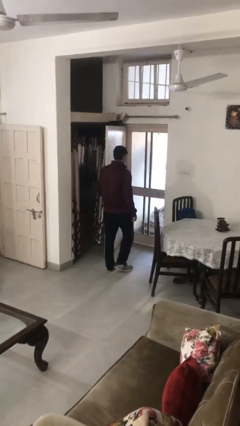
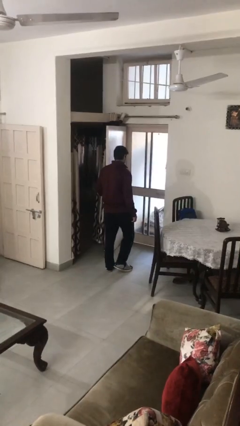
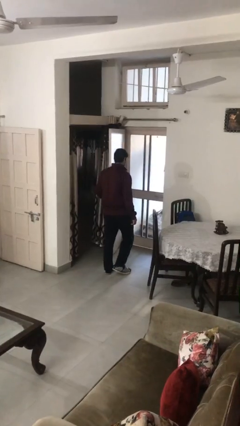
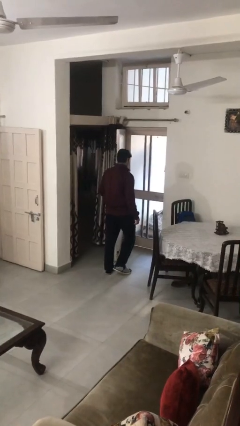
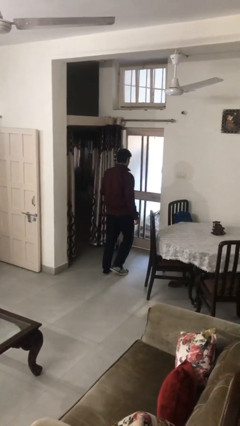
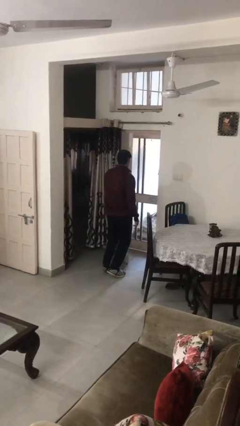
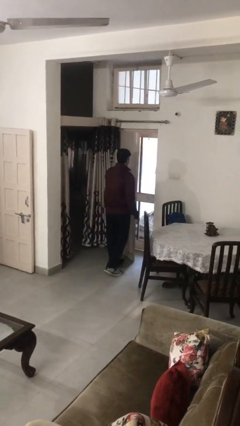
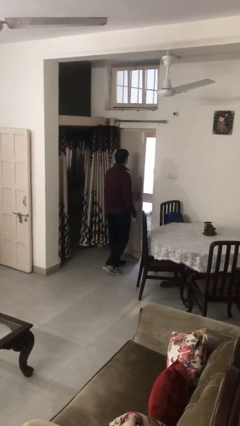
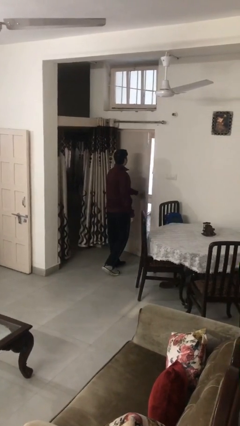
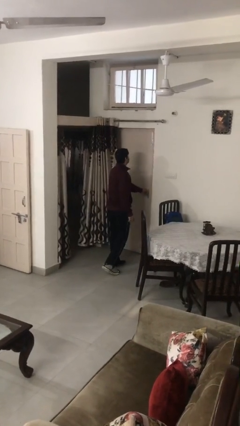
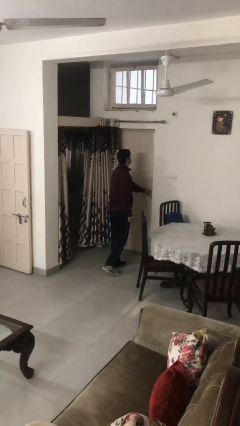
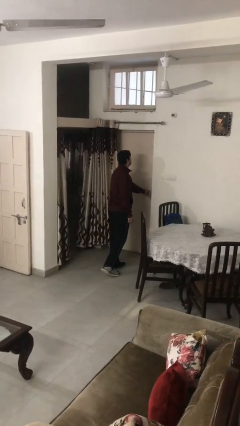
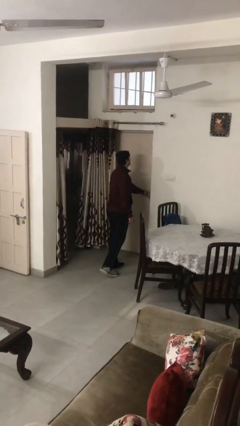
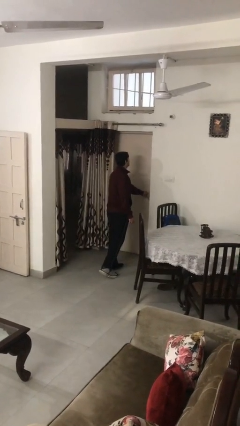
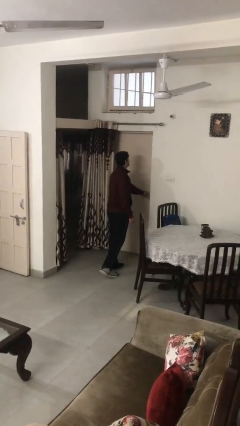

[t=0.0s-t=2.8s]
person closes facility door

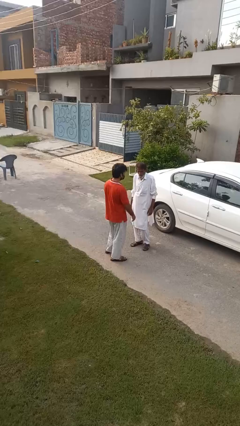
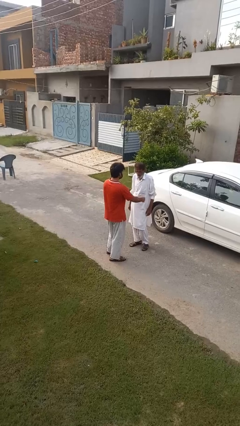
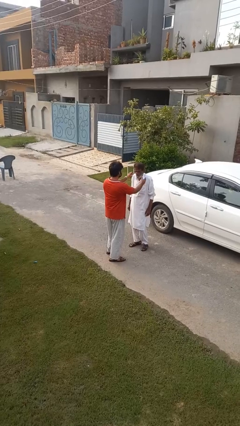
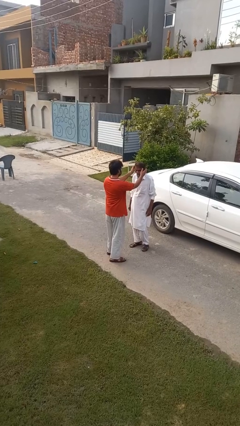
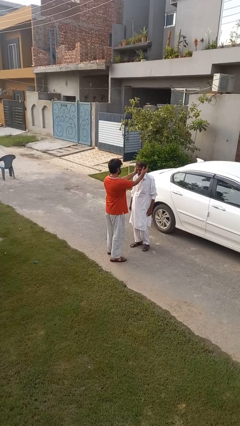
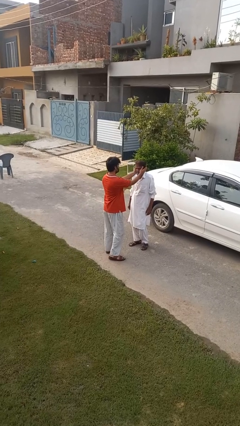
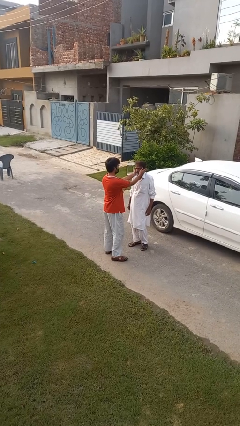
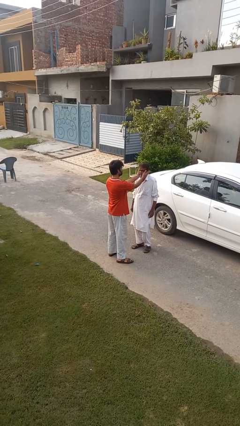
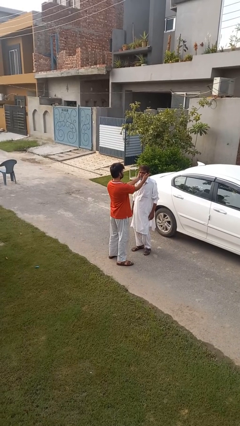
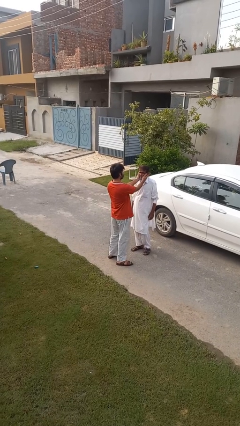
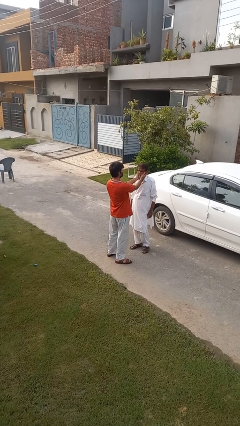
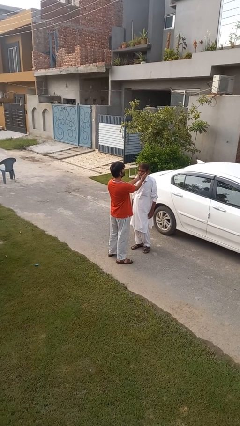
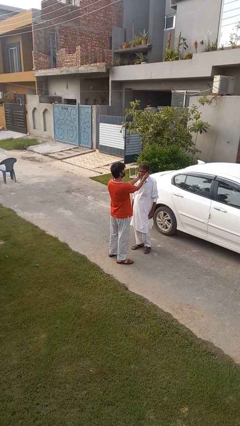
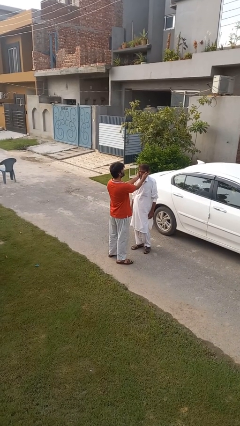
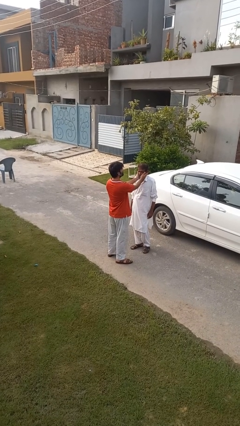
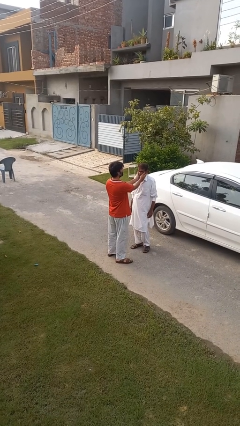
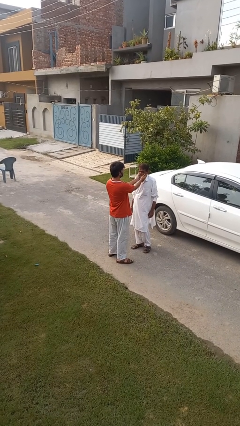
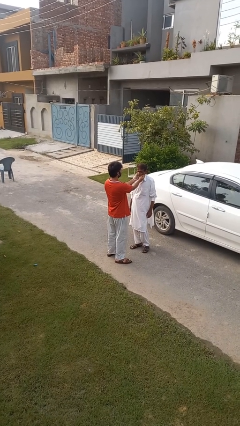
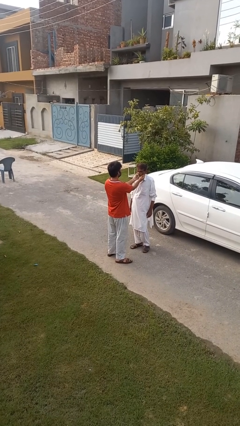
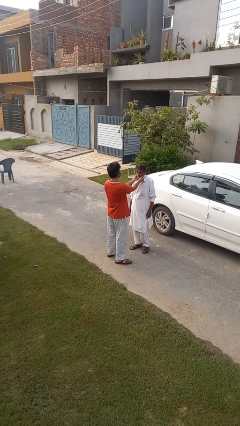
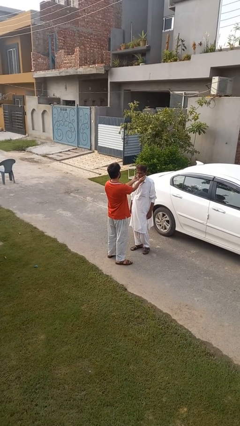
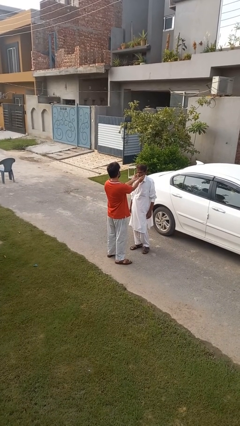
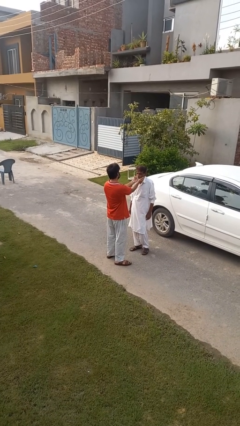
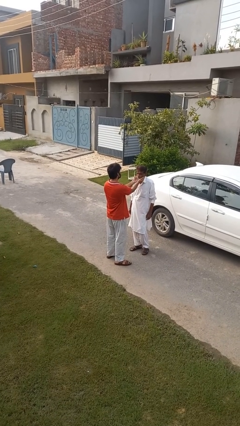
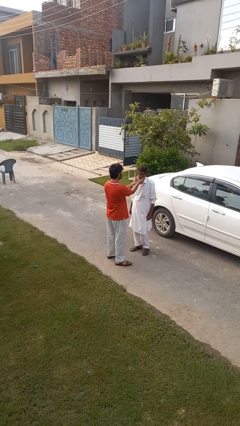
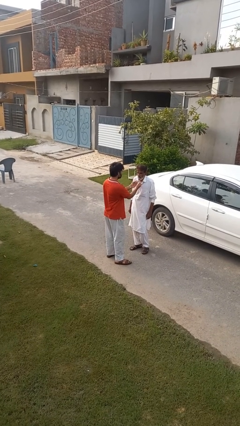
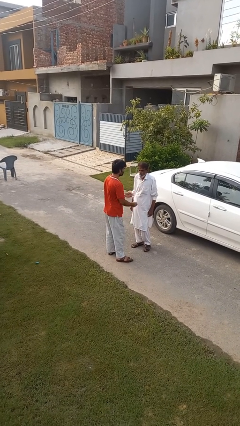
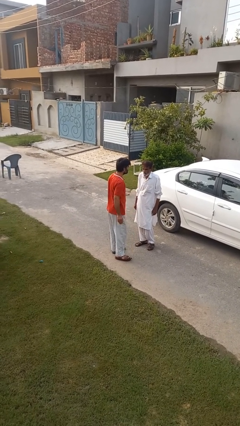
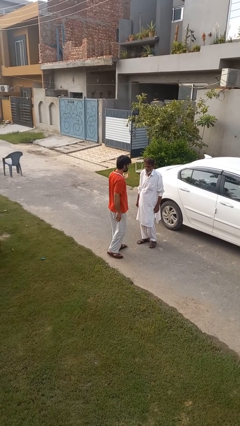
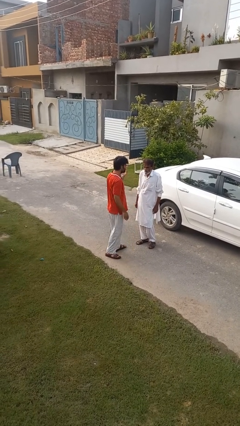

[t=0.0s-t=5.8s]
person touches face of person

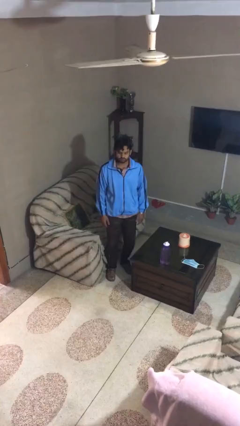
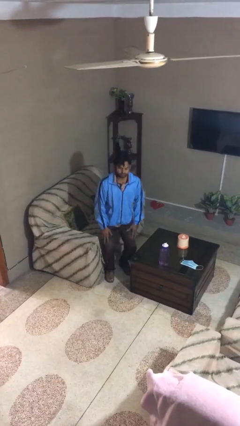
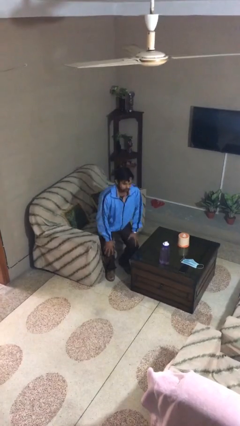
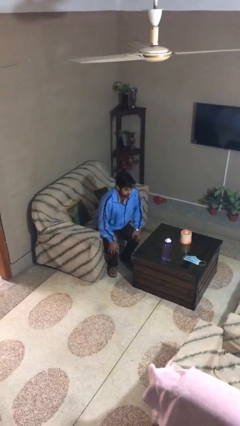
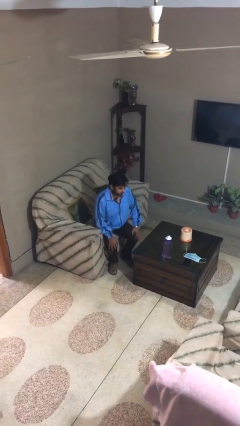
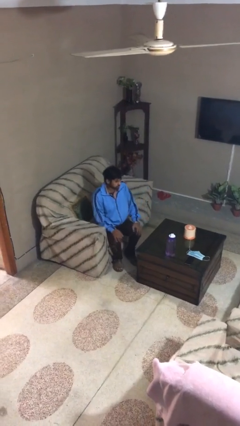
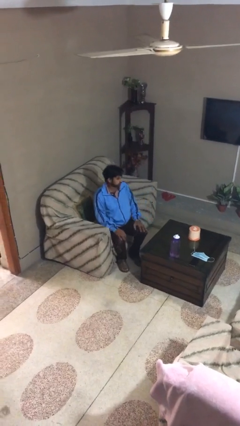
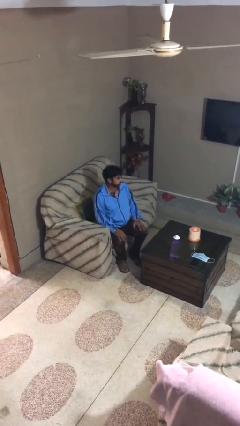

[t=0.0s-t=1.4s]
person sits down

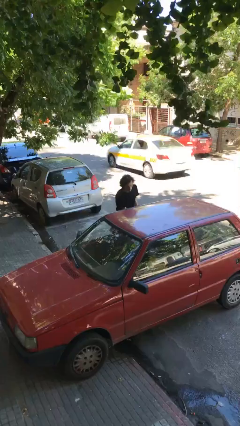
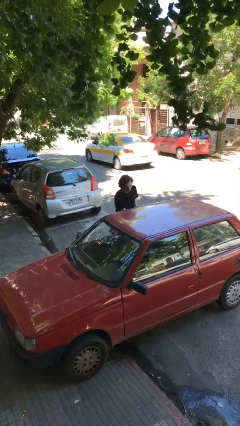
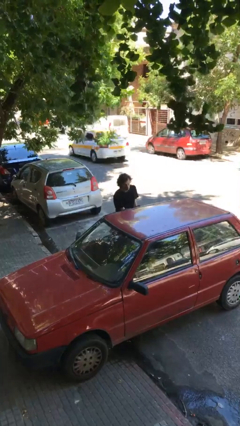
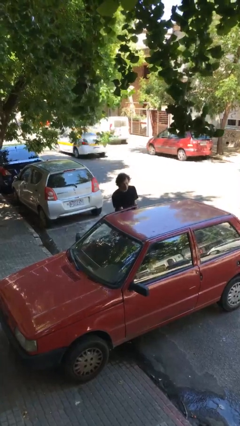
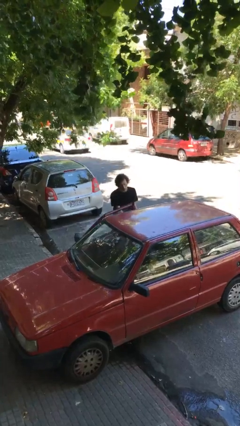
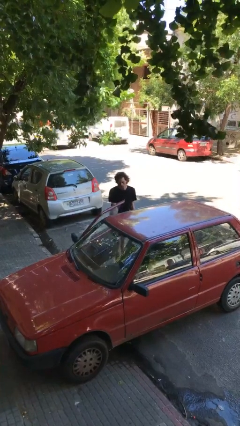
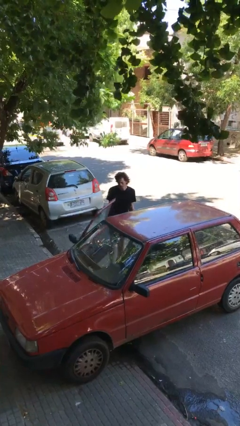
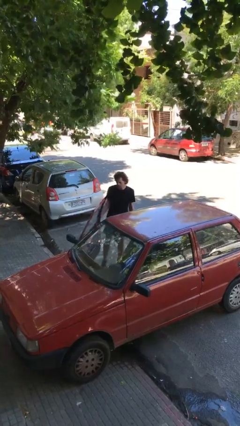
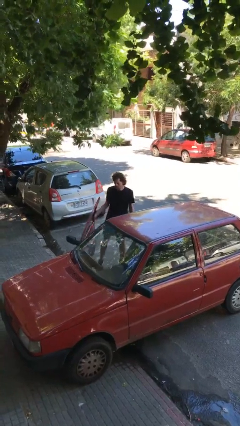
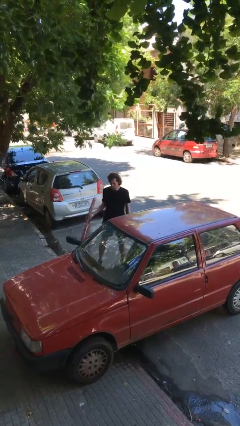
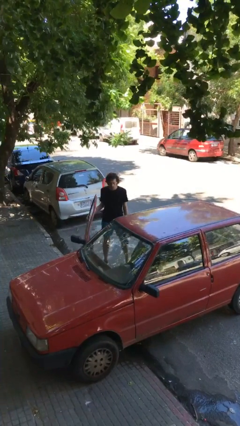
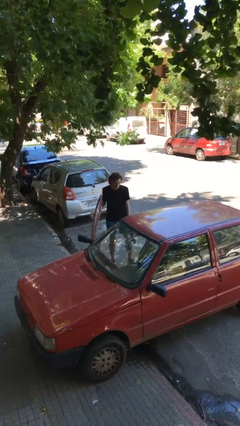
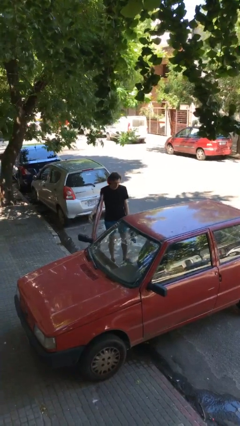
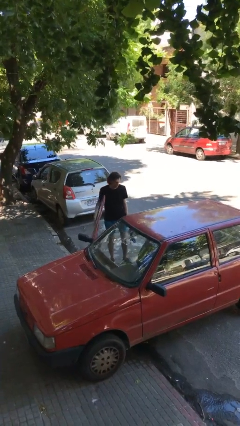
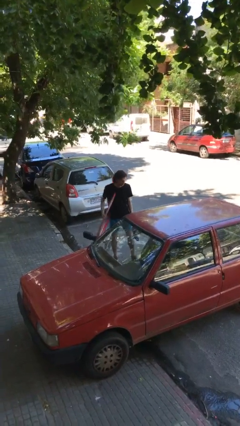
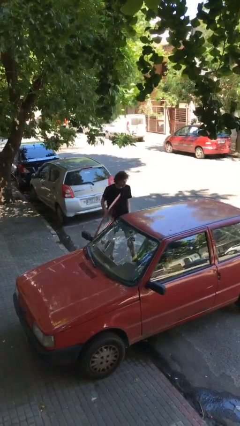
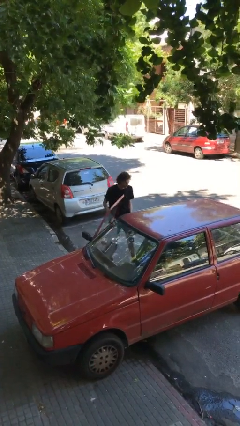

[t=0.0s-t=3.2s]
person opens car door

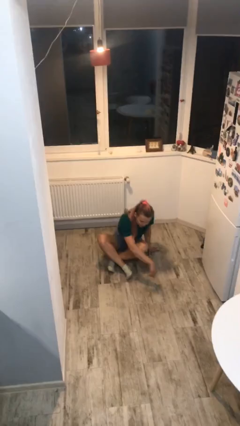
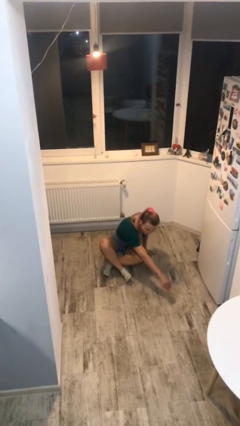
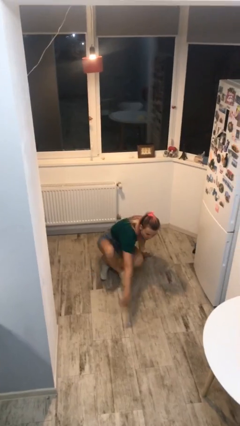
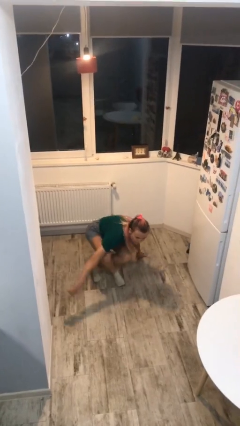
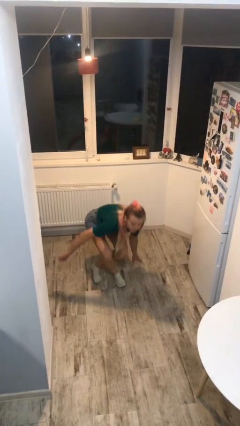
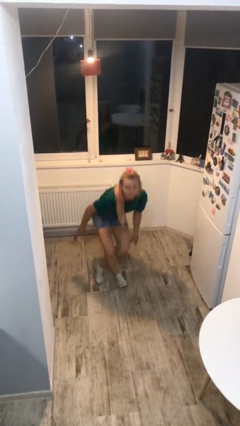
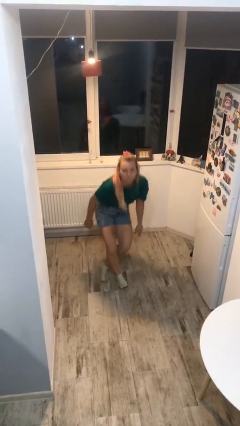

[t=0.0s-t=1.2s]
person stands up from floor

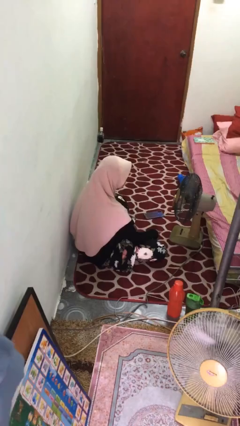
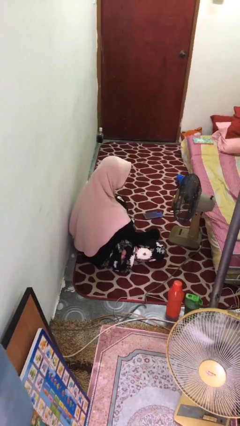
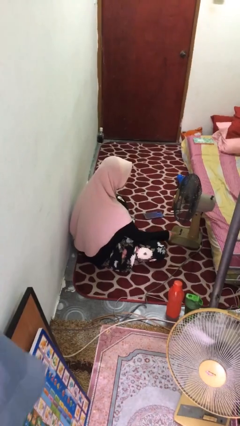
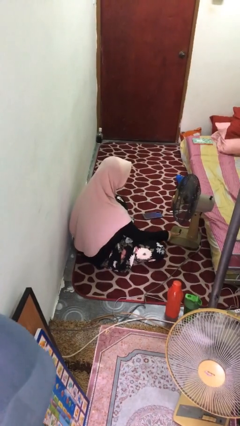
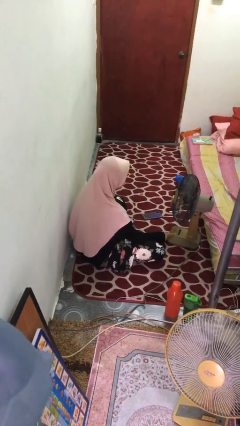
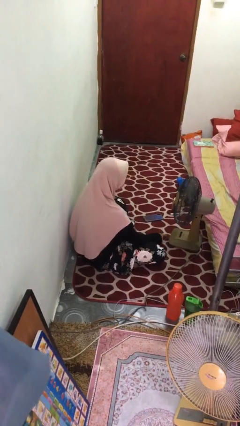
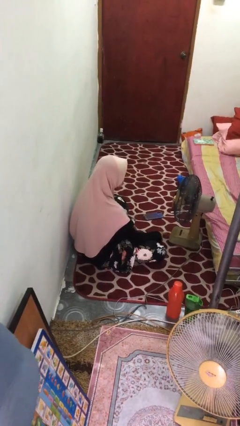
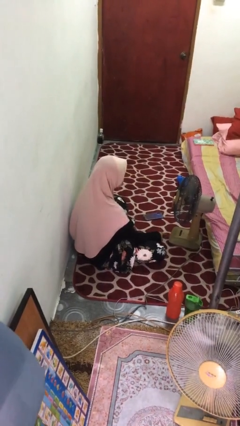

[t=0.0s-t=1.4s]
person turns off fan

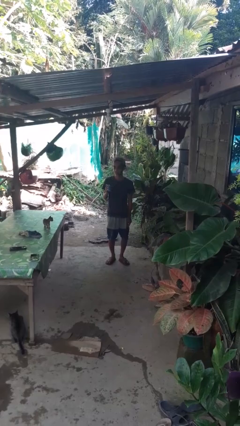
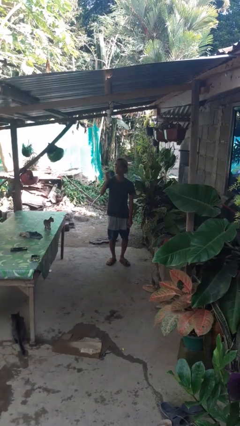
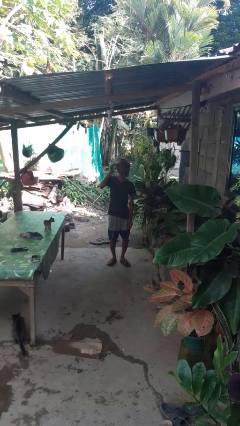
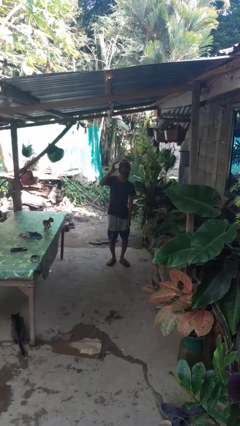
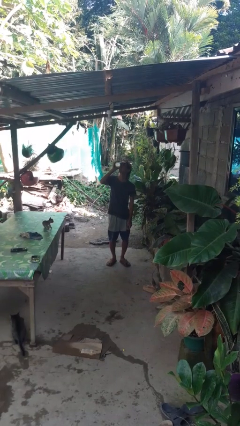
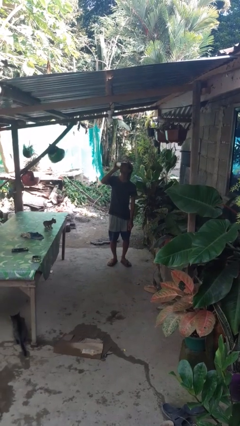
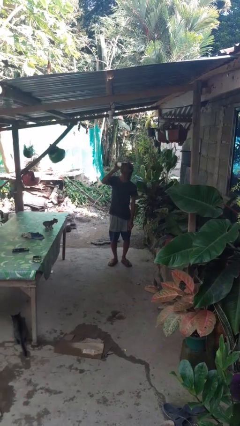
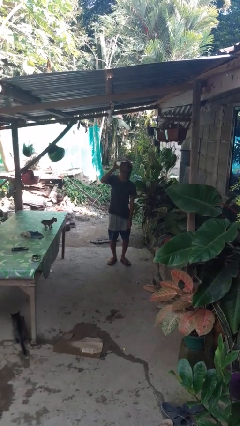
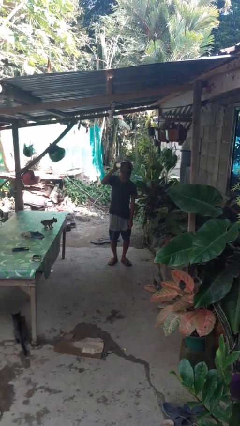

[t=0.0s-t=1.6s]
person drinks from beverage can

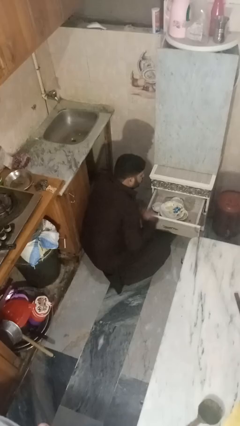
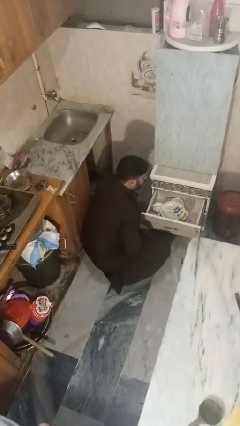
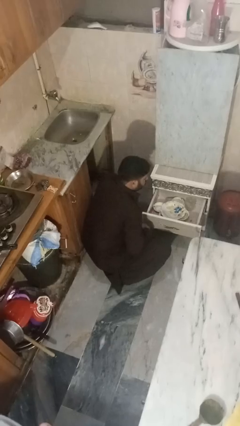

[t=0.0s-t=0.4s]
person searches in kitchen drawer
